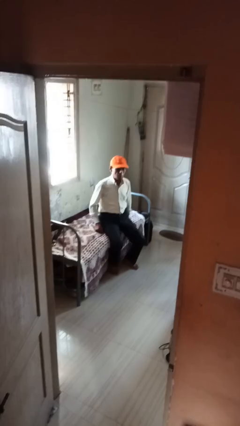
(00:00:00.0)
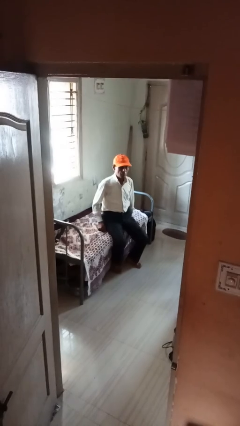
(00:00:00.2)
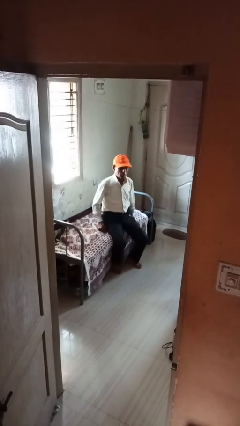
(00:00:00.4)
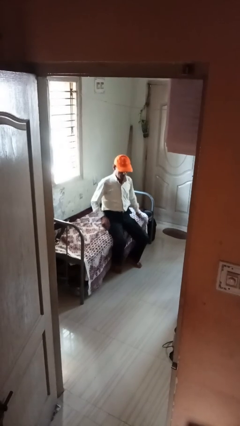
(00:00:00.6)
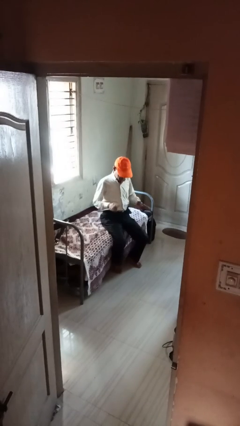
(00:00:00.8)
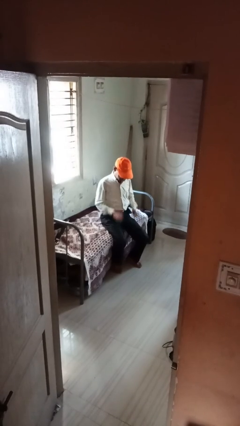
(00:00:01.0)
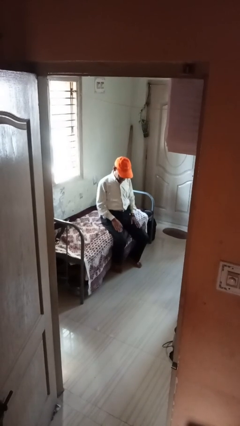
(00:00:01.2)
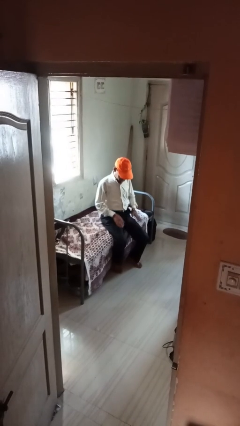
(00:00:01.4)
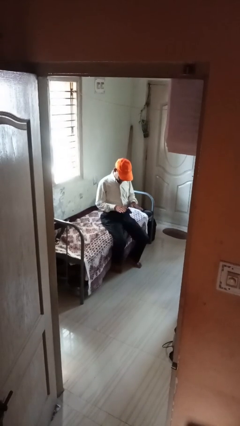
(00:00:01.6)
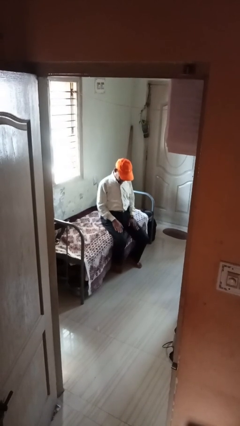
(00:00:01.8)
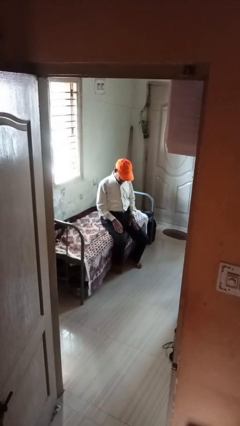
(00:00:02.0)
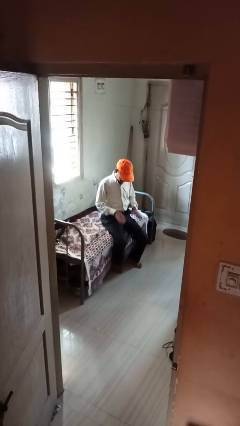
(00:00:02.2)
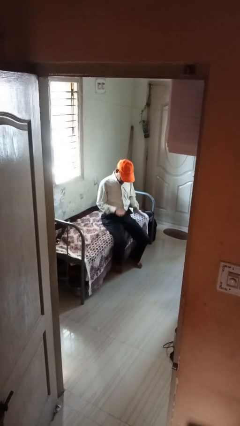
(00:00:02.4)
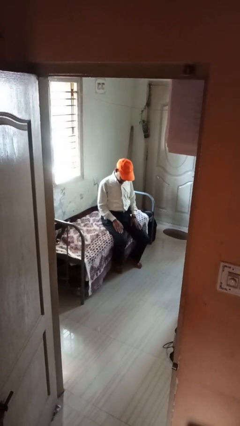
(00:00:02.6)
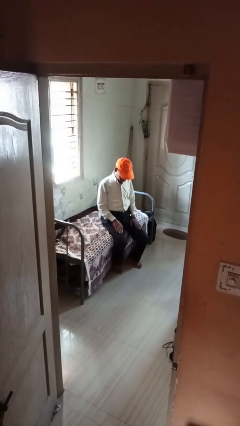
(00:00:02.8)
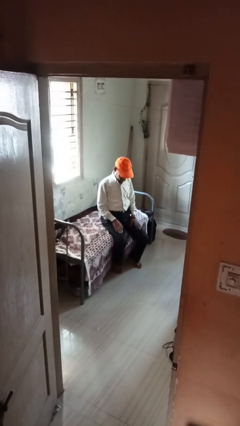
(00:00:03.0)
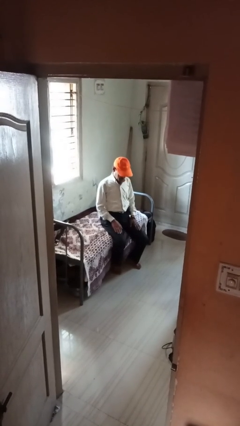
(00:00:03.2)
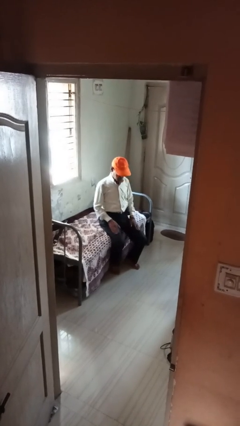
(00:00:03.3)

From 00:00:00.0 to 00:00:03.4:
person slaps hands on thighs

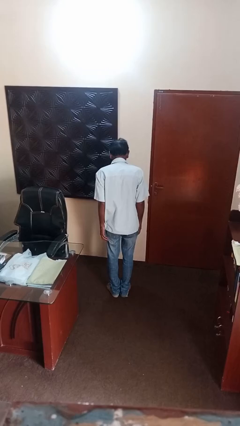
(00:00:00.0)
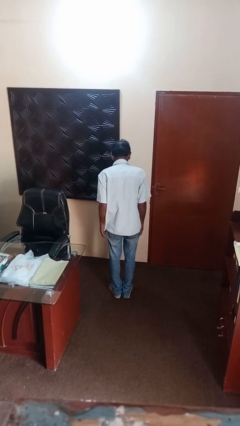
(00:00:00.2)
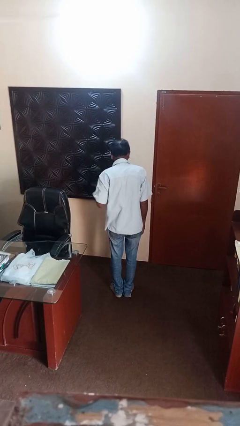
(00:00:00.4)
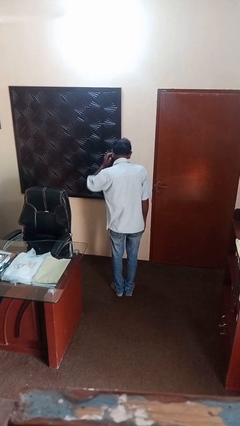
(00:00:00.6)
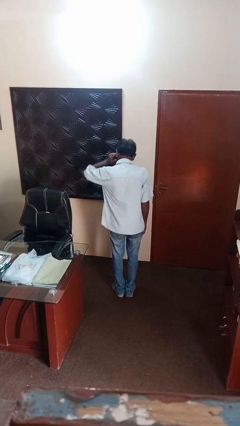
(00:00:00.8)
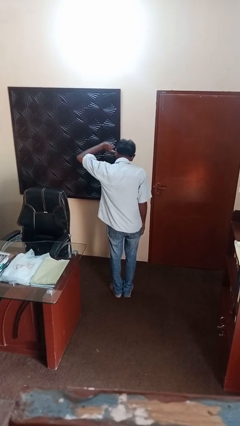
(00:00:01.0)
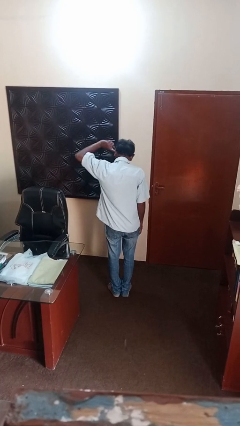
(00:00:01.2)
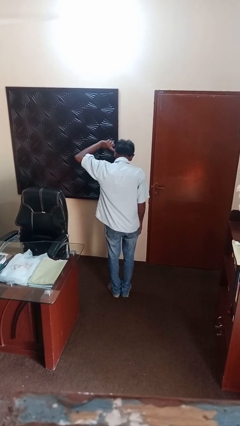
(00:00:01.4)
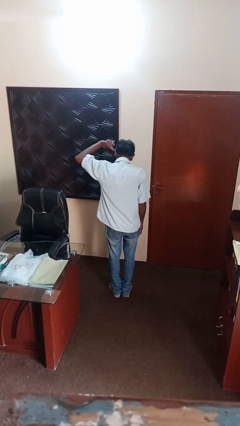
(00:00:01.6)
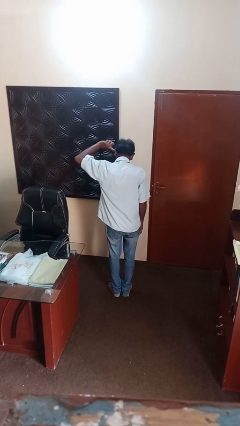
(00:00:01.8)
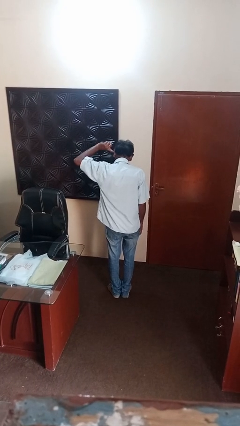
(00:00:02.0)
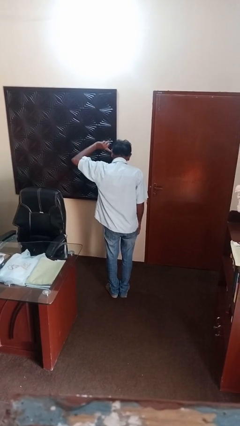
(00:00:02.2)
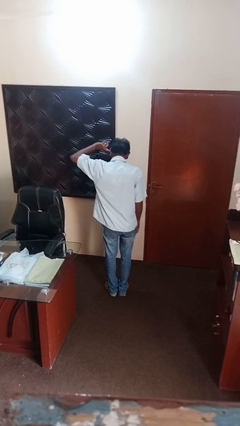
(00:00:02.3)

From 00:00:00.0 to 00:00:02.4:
person puts fingers in ear

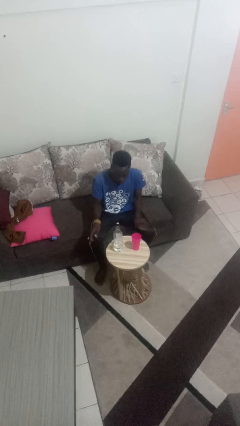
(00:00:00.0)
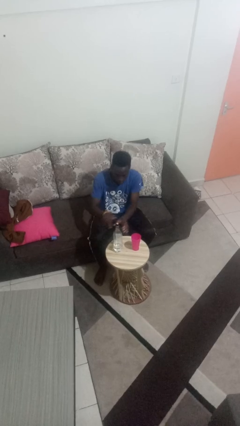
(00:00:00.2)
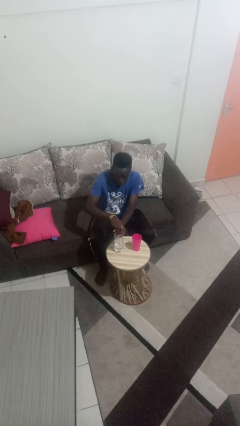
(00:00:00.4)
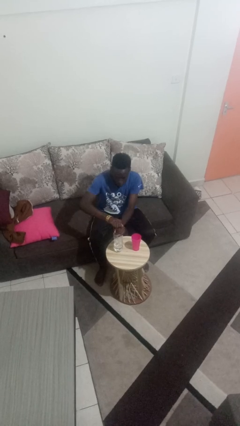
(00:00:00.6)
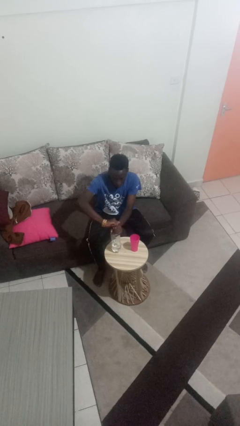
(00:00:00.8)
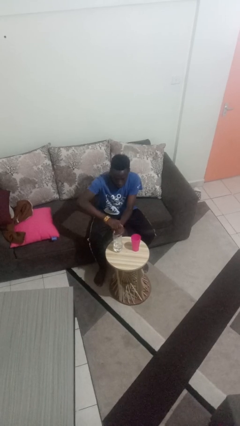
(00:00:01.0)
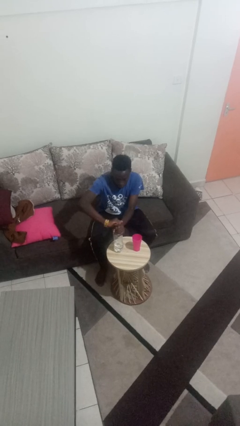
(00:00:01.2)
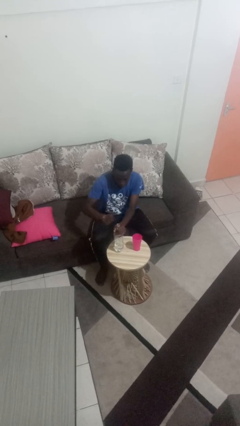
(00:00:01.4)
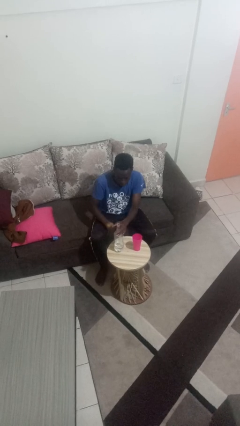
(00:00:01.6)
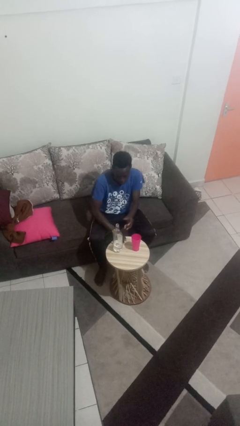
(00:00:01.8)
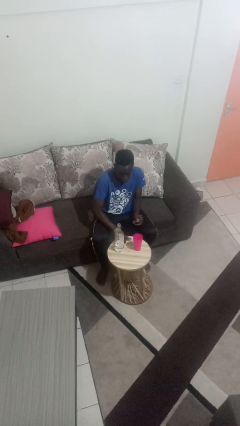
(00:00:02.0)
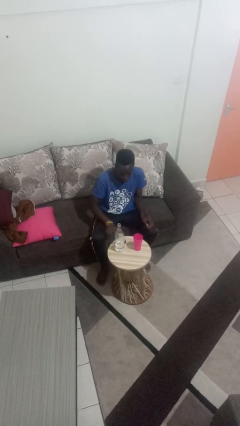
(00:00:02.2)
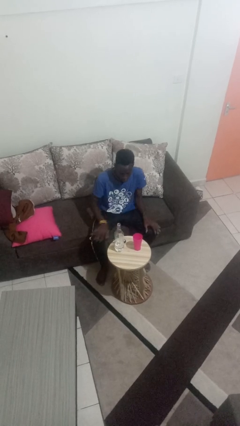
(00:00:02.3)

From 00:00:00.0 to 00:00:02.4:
person unscrews lid from bottle

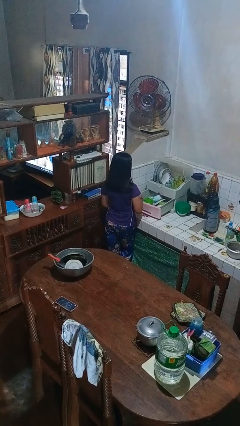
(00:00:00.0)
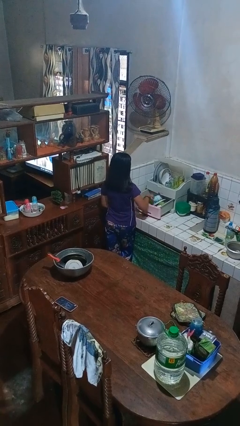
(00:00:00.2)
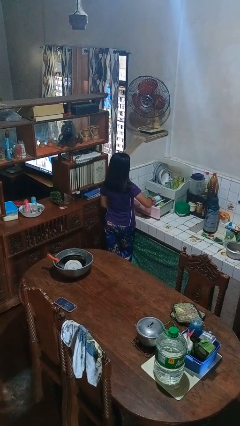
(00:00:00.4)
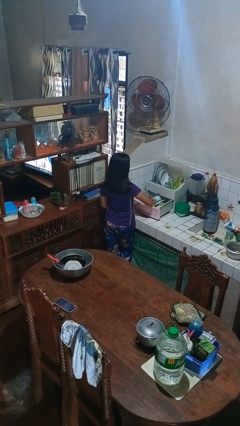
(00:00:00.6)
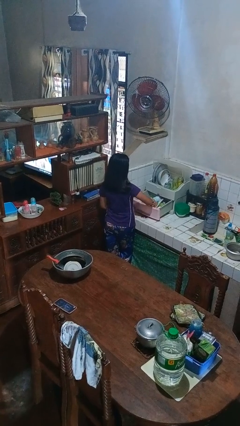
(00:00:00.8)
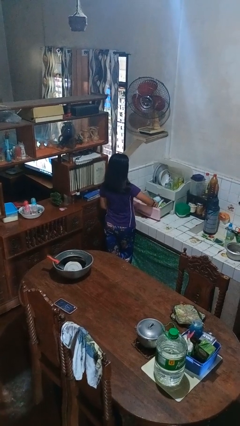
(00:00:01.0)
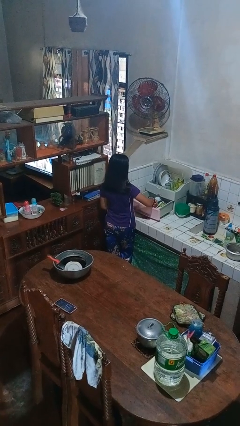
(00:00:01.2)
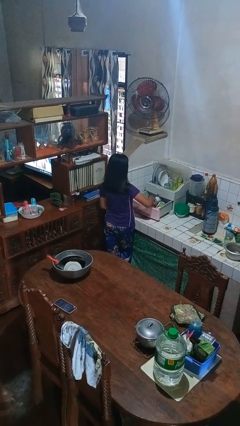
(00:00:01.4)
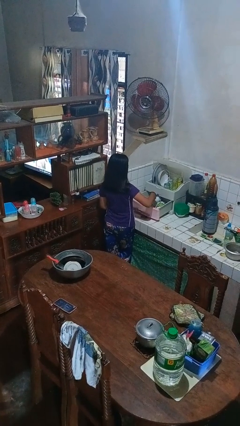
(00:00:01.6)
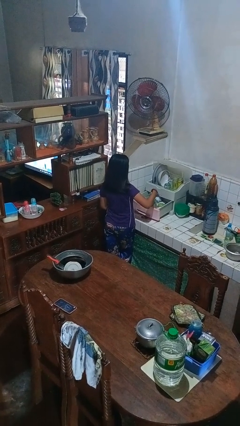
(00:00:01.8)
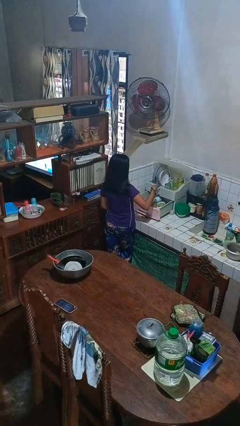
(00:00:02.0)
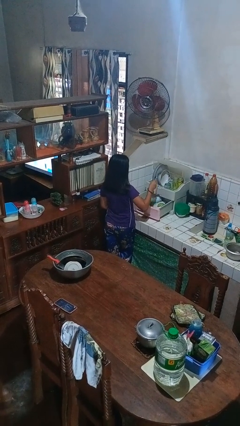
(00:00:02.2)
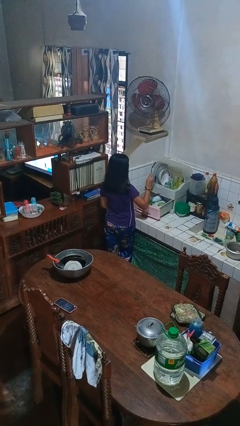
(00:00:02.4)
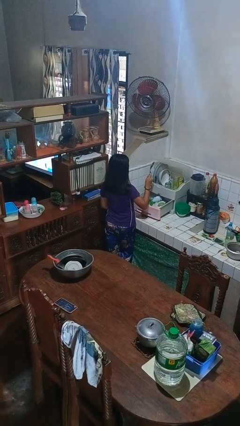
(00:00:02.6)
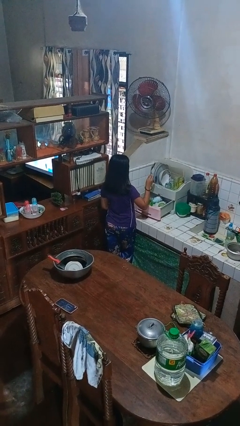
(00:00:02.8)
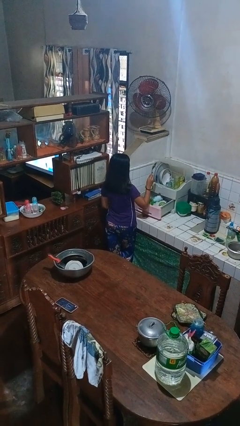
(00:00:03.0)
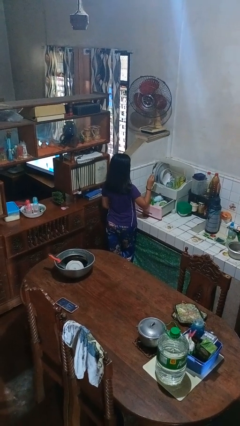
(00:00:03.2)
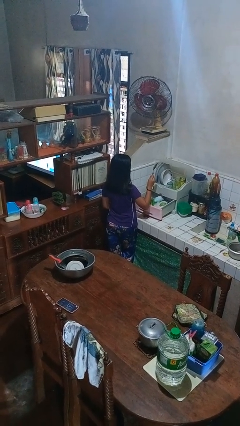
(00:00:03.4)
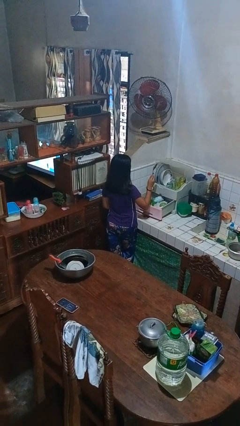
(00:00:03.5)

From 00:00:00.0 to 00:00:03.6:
person takes object from kitchen drawer

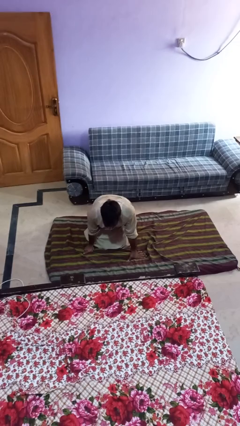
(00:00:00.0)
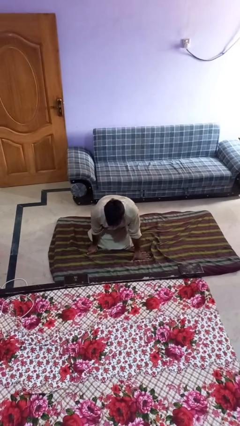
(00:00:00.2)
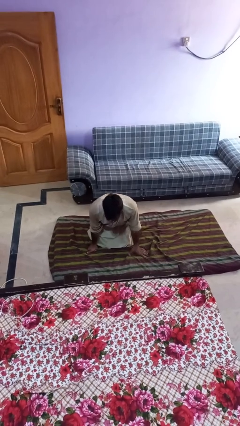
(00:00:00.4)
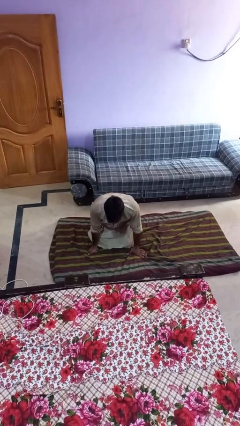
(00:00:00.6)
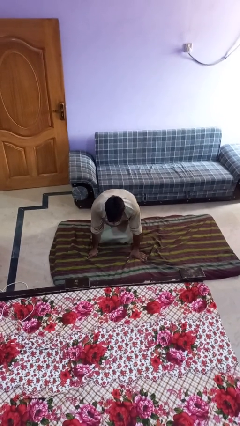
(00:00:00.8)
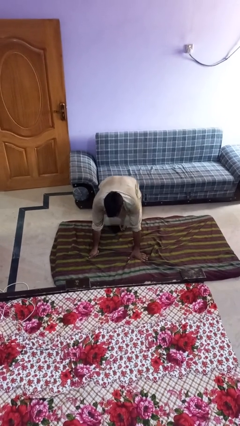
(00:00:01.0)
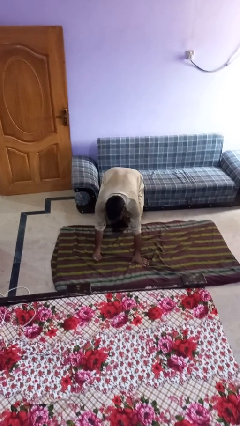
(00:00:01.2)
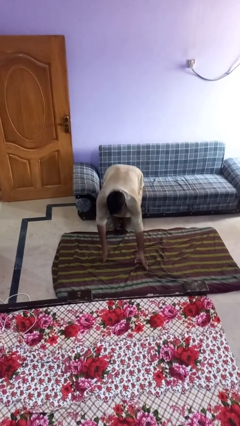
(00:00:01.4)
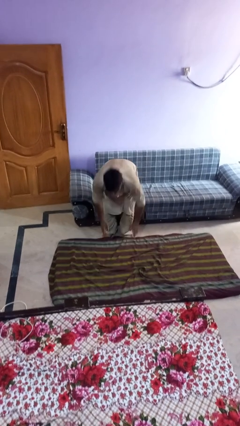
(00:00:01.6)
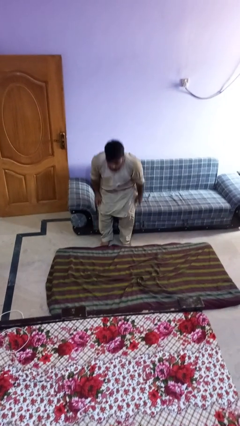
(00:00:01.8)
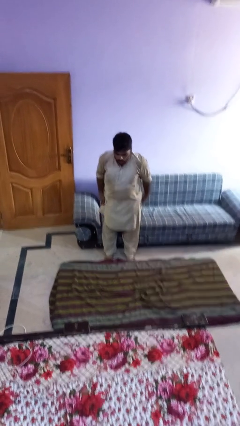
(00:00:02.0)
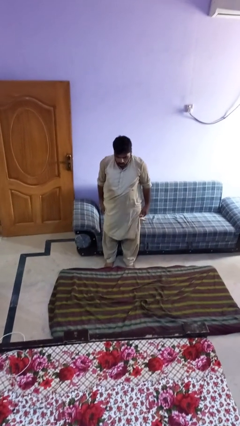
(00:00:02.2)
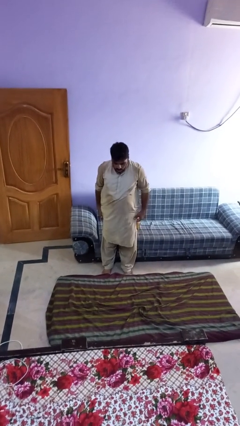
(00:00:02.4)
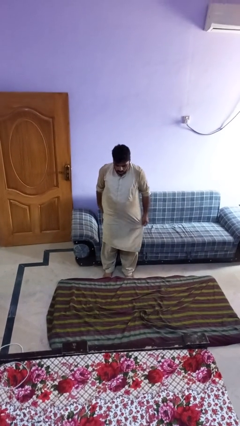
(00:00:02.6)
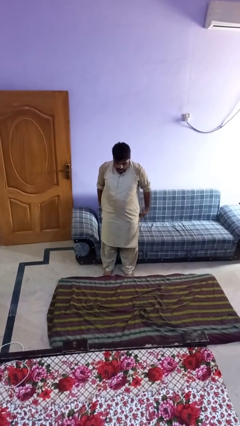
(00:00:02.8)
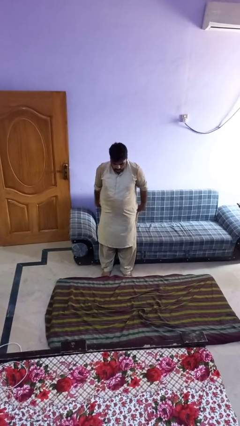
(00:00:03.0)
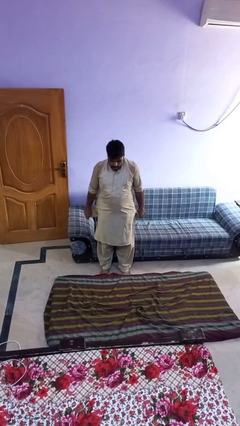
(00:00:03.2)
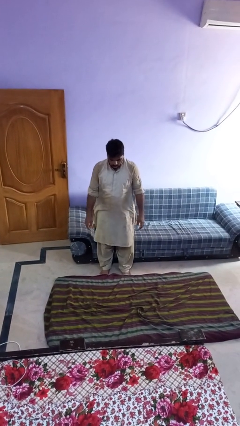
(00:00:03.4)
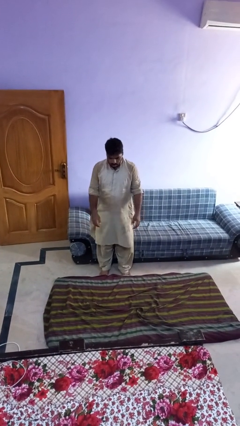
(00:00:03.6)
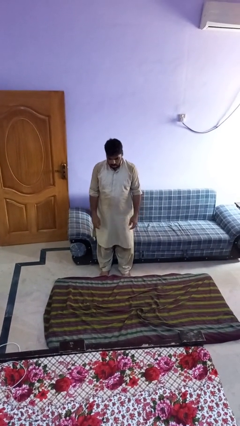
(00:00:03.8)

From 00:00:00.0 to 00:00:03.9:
person stands up from floor

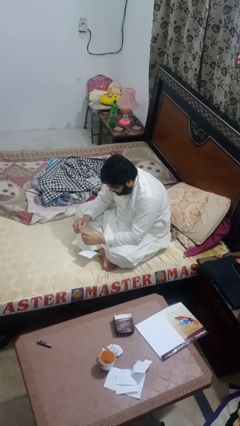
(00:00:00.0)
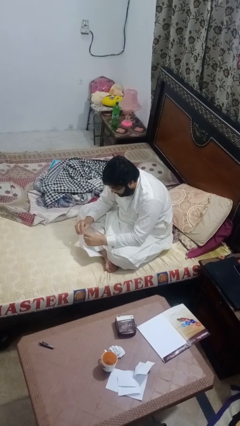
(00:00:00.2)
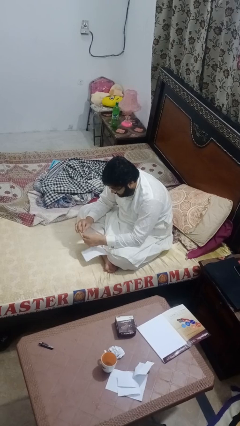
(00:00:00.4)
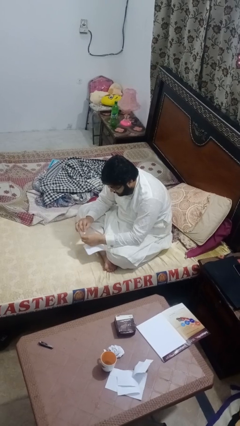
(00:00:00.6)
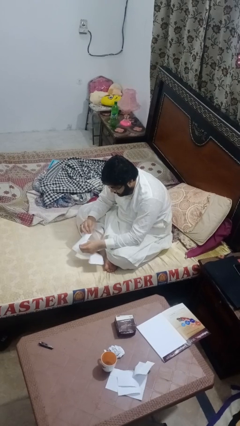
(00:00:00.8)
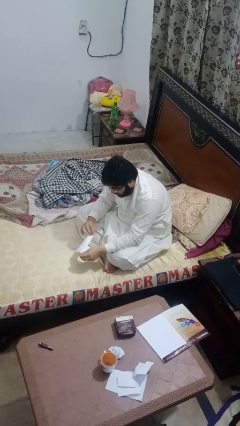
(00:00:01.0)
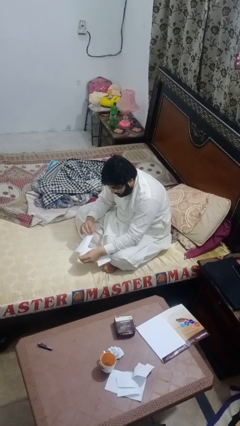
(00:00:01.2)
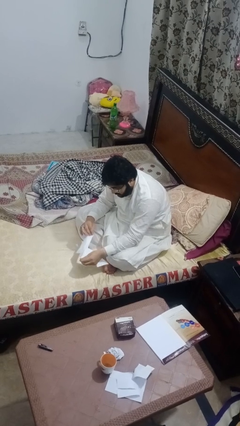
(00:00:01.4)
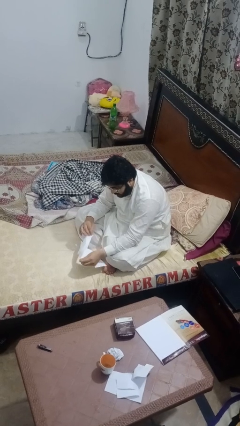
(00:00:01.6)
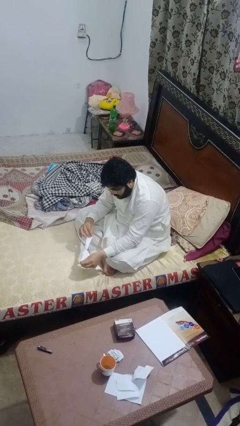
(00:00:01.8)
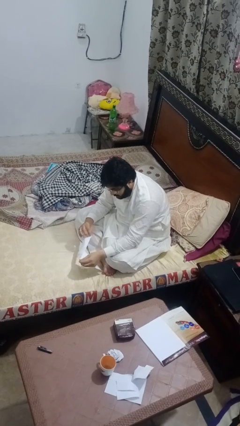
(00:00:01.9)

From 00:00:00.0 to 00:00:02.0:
person tears paper
